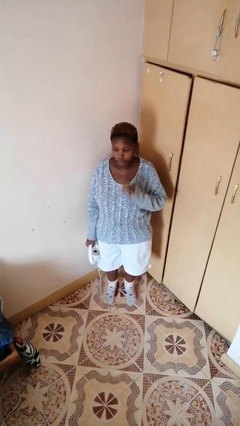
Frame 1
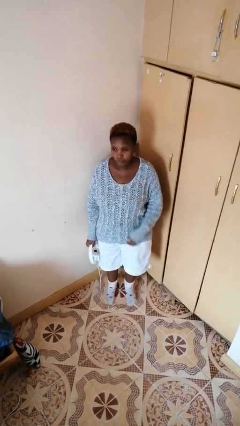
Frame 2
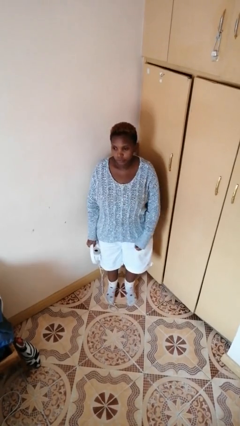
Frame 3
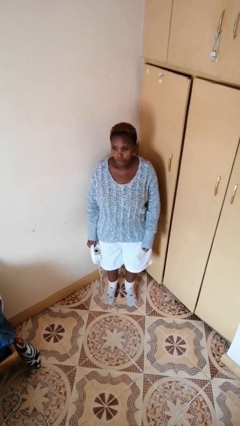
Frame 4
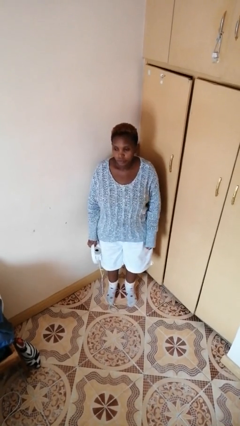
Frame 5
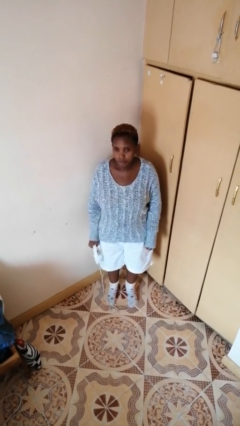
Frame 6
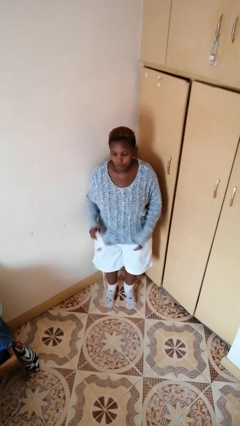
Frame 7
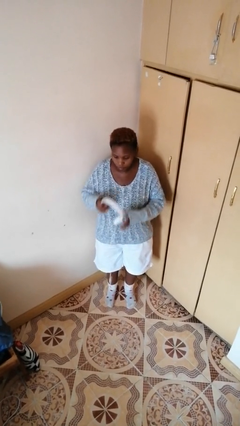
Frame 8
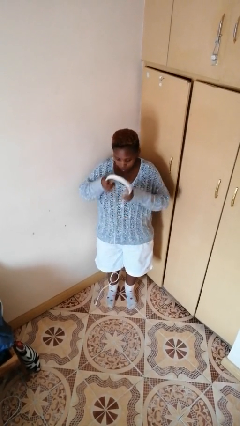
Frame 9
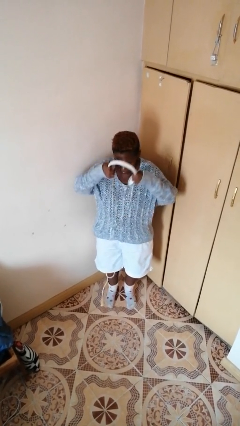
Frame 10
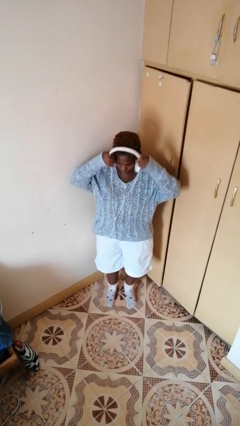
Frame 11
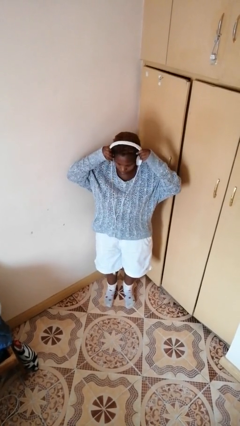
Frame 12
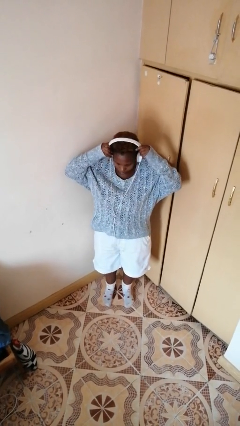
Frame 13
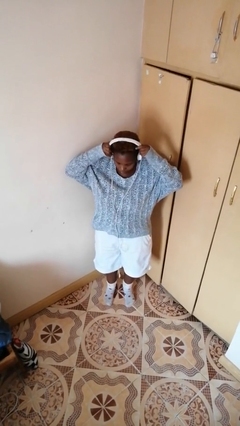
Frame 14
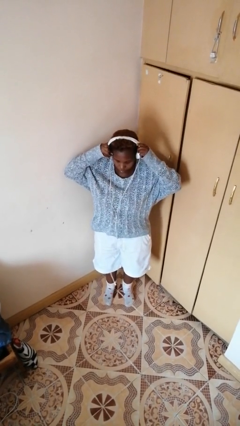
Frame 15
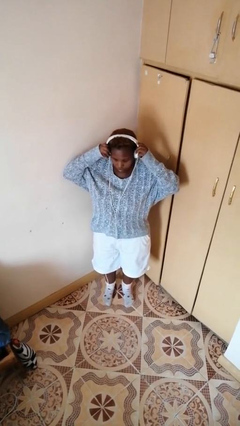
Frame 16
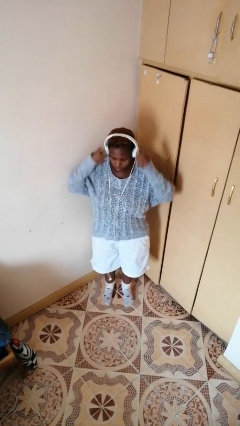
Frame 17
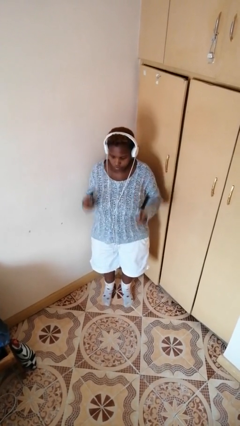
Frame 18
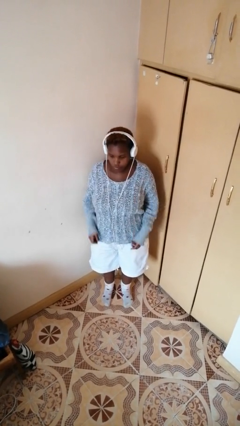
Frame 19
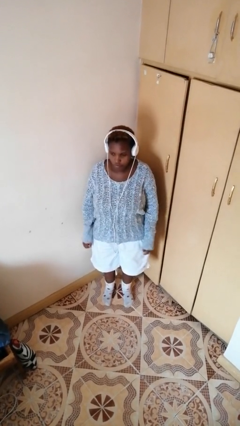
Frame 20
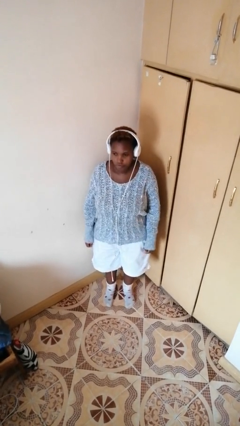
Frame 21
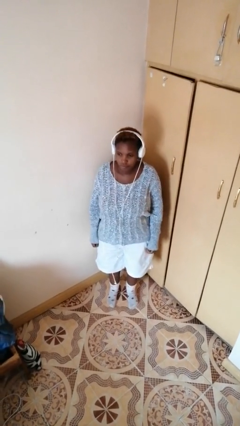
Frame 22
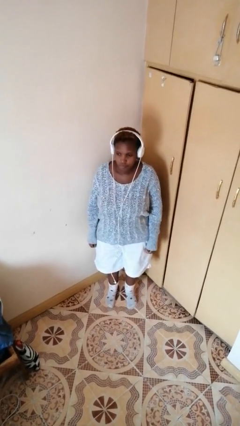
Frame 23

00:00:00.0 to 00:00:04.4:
person puts on headphones

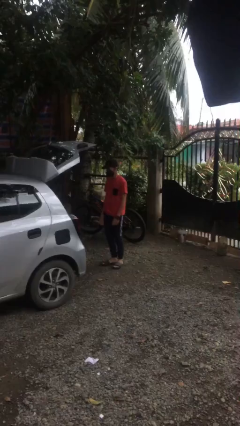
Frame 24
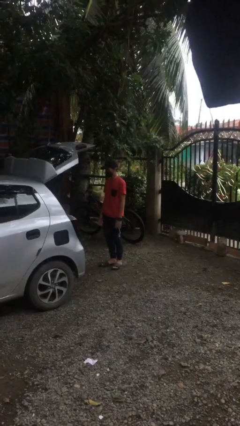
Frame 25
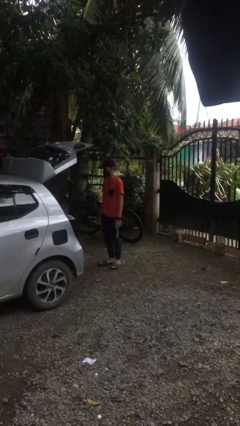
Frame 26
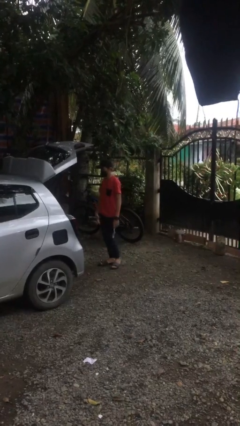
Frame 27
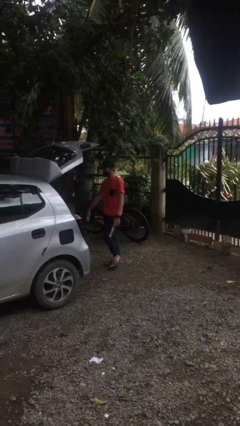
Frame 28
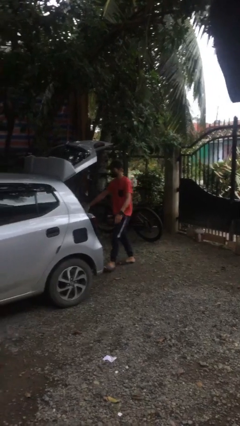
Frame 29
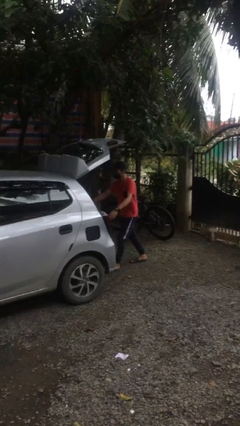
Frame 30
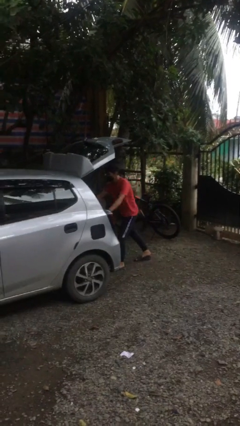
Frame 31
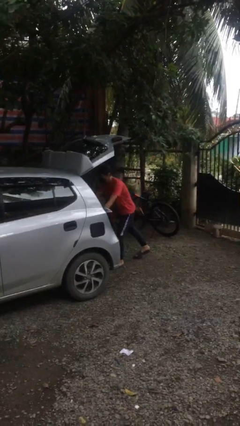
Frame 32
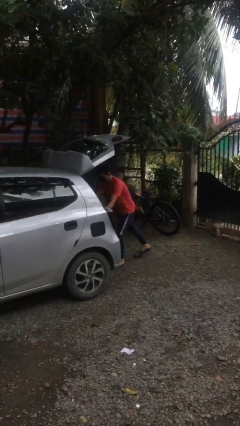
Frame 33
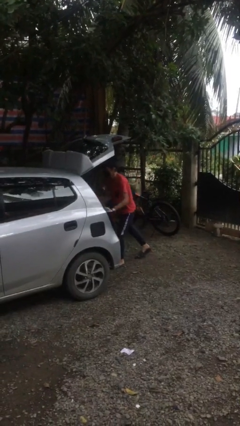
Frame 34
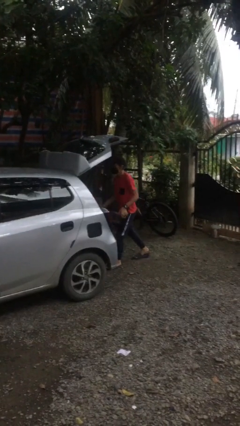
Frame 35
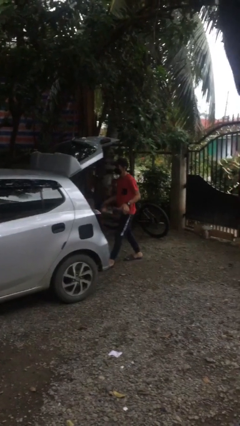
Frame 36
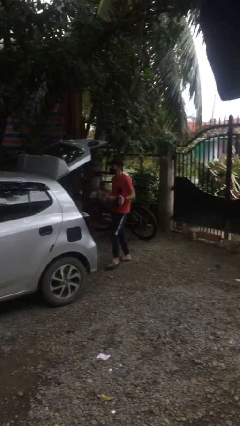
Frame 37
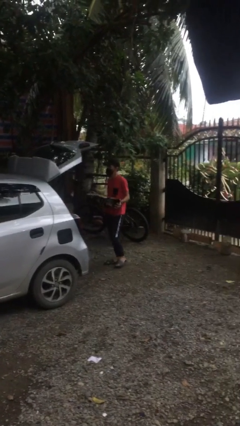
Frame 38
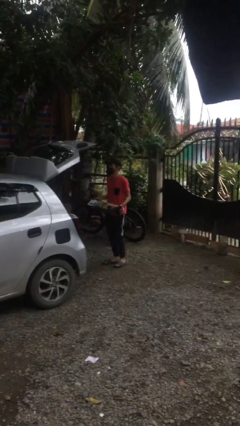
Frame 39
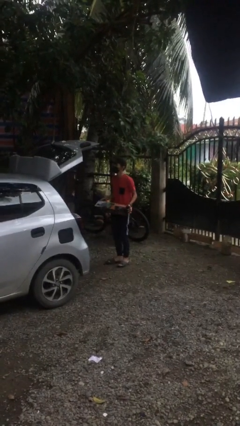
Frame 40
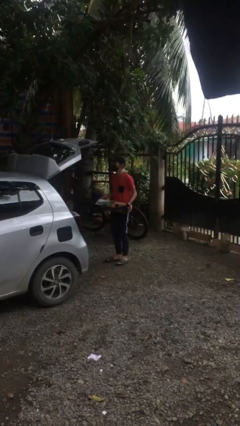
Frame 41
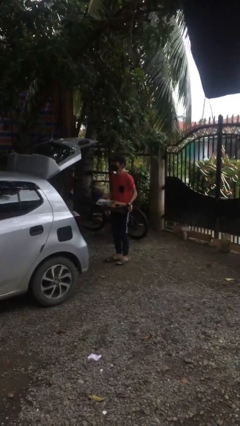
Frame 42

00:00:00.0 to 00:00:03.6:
person unloads car

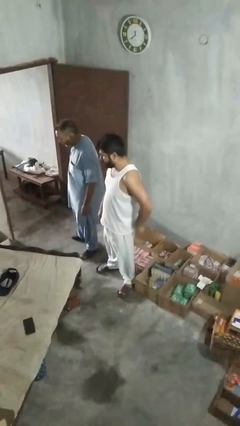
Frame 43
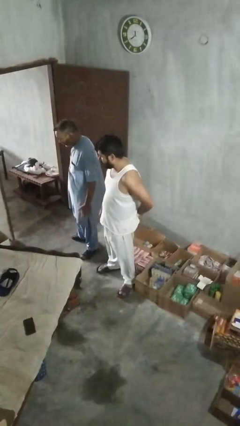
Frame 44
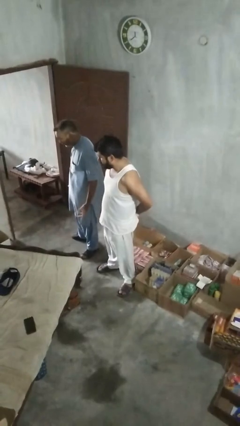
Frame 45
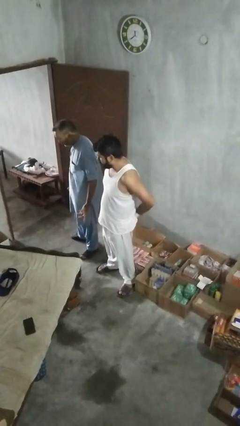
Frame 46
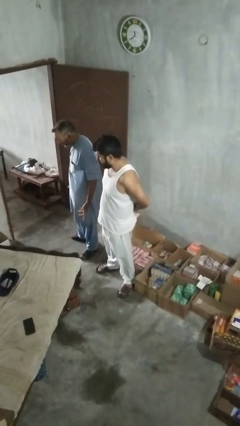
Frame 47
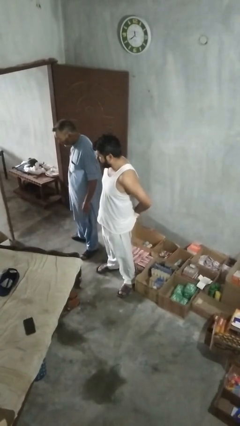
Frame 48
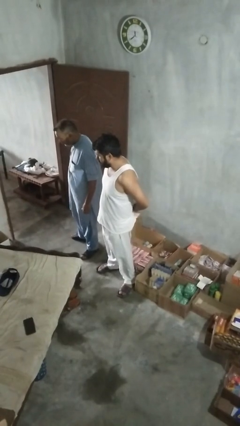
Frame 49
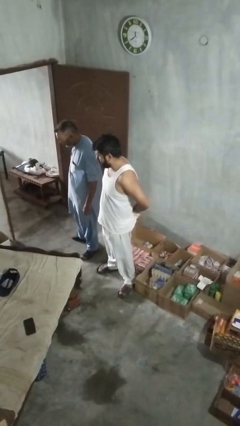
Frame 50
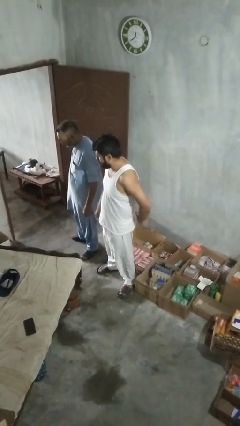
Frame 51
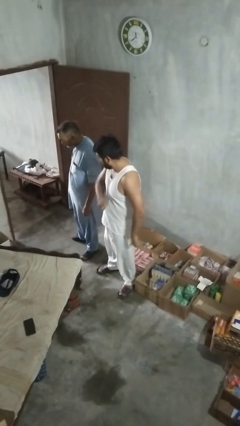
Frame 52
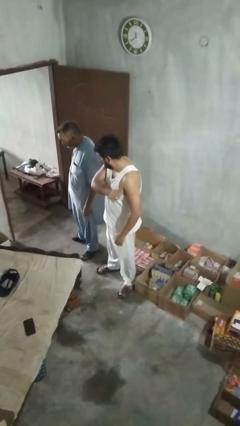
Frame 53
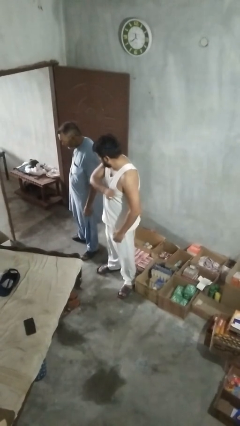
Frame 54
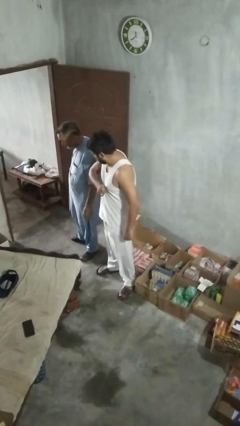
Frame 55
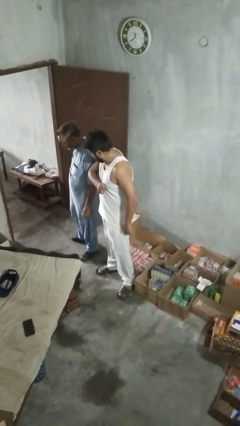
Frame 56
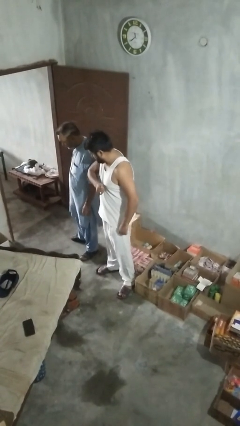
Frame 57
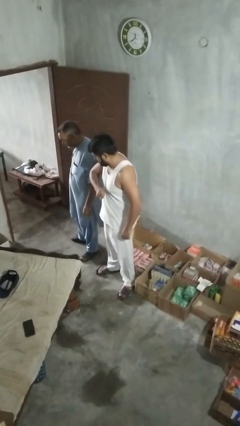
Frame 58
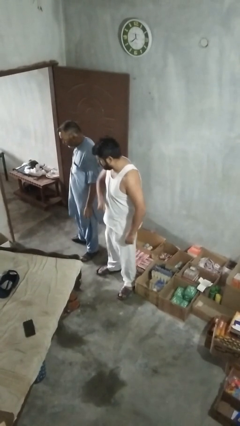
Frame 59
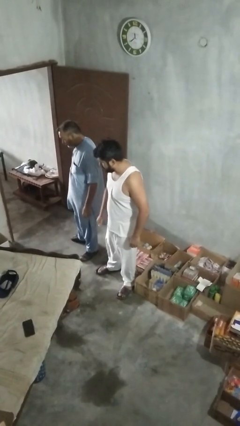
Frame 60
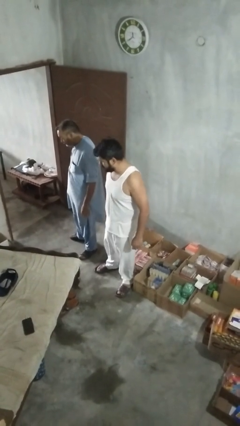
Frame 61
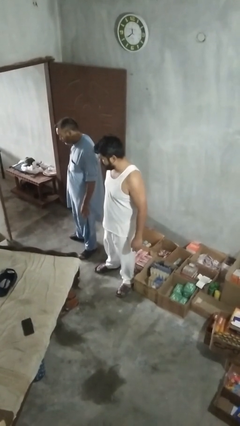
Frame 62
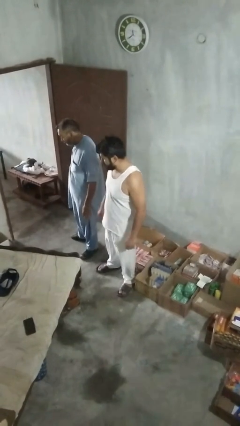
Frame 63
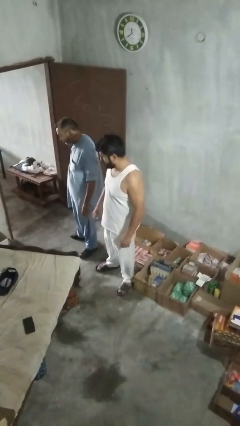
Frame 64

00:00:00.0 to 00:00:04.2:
person nudges person with elbow

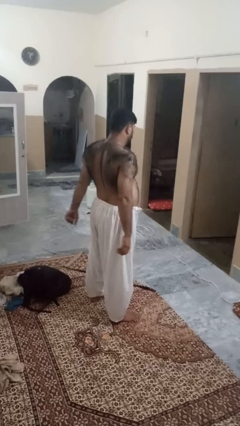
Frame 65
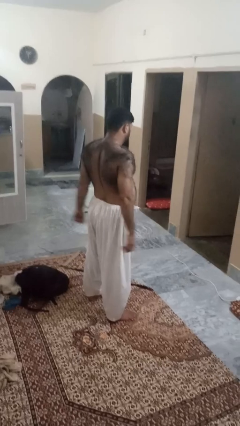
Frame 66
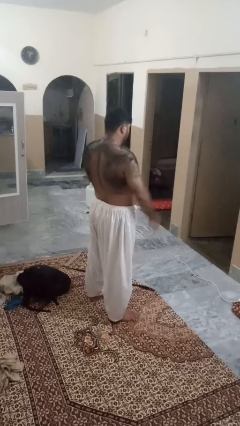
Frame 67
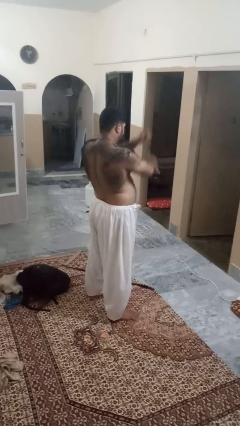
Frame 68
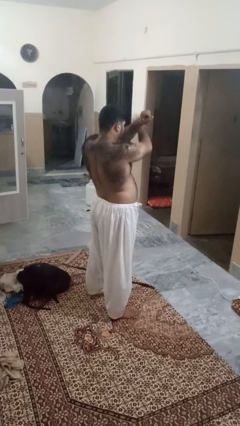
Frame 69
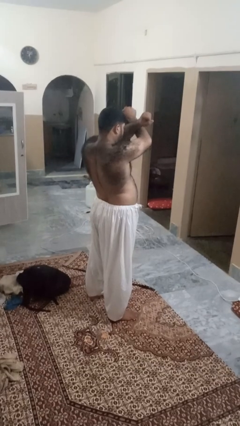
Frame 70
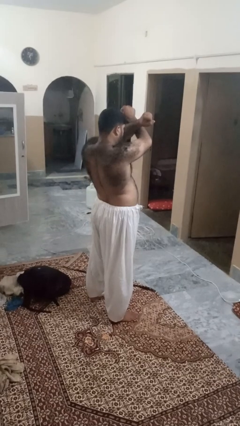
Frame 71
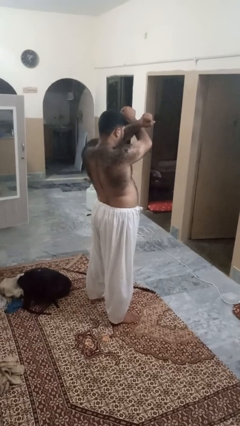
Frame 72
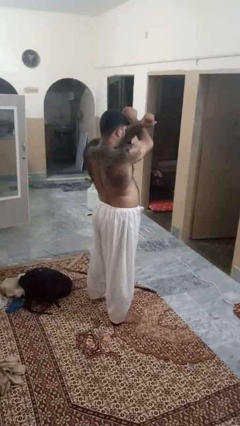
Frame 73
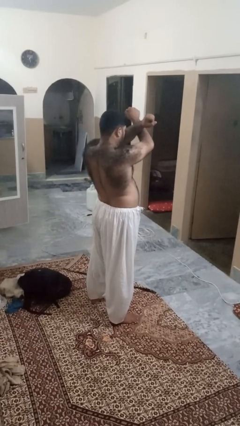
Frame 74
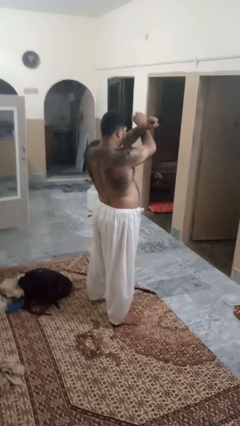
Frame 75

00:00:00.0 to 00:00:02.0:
person gestures arms x

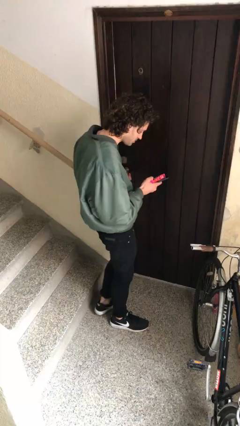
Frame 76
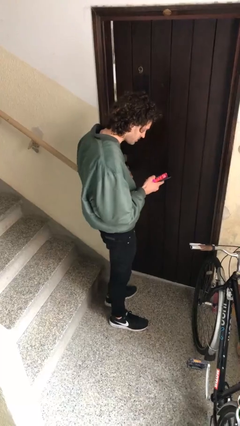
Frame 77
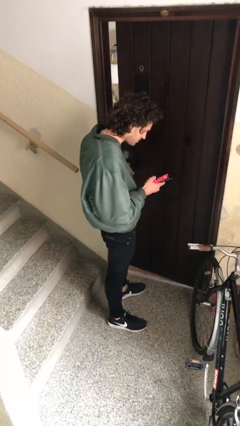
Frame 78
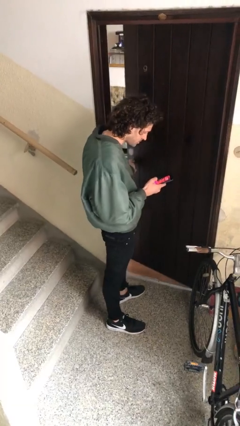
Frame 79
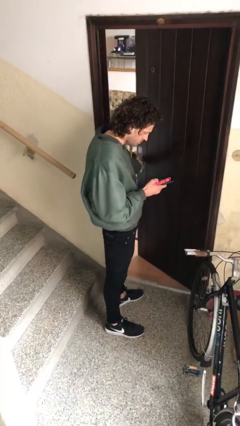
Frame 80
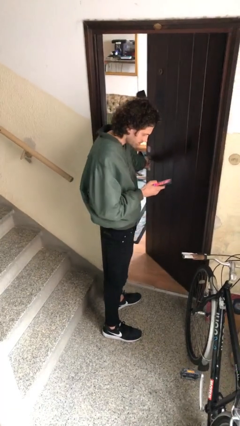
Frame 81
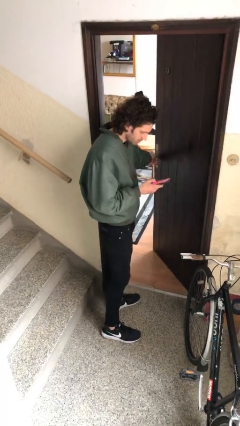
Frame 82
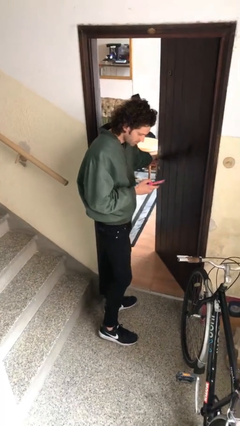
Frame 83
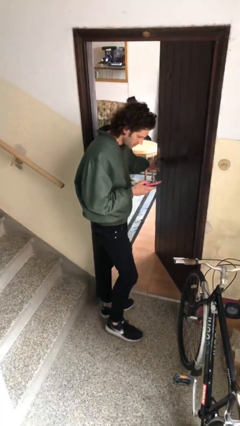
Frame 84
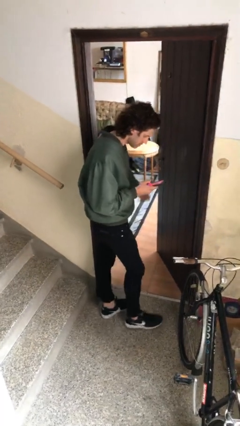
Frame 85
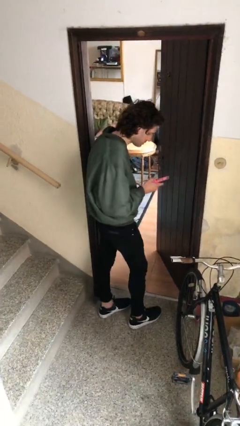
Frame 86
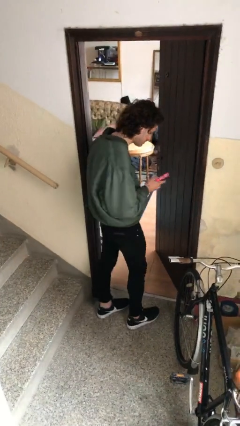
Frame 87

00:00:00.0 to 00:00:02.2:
person opens facility door

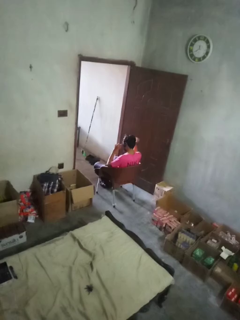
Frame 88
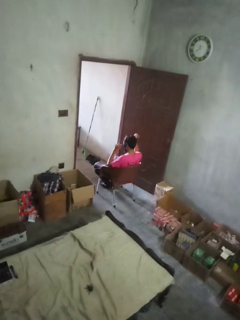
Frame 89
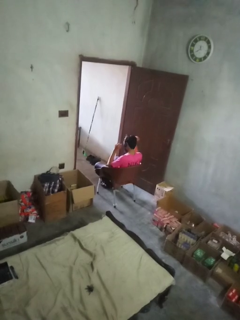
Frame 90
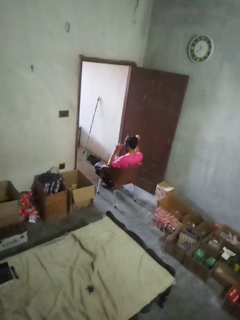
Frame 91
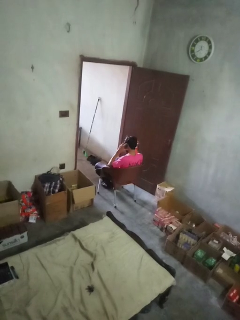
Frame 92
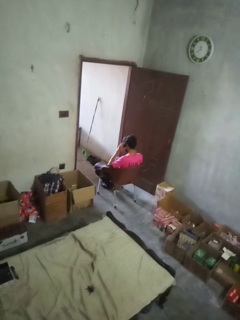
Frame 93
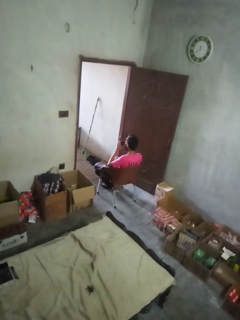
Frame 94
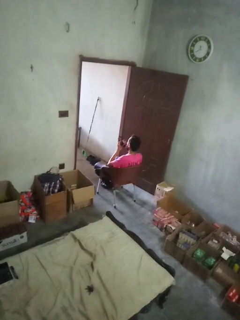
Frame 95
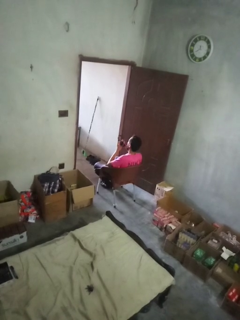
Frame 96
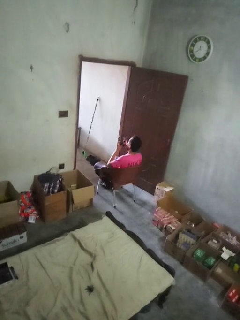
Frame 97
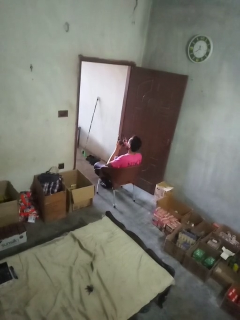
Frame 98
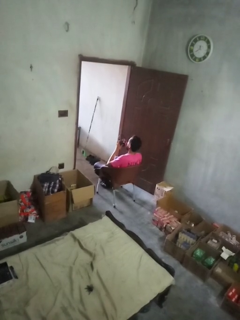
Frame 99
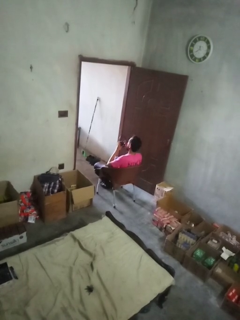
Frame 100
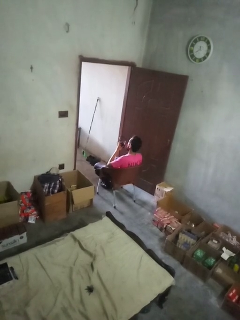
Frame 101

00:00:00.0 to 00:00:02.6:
person takes off headphones
